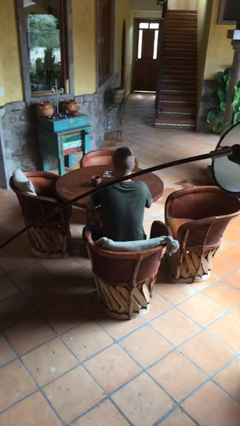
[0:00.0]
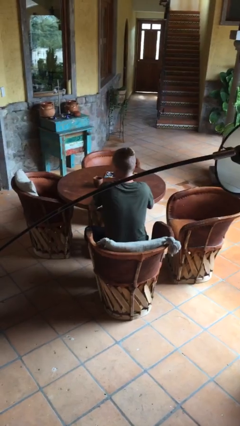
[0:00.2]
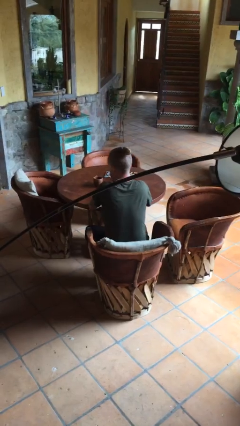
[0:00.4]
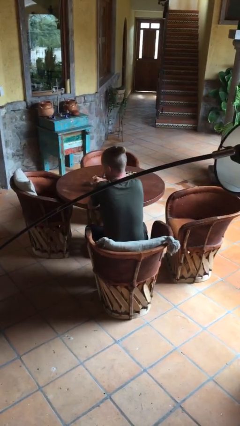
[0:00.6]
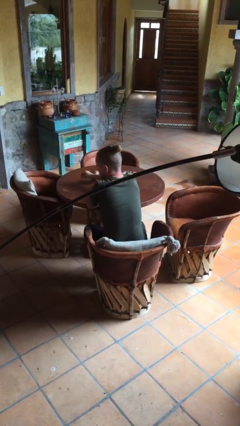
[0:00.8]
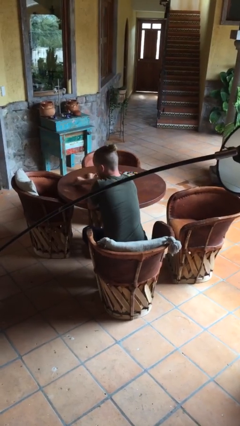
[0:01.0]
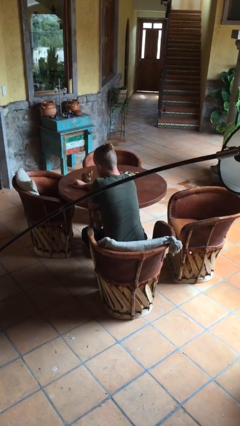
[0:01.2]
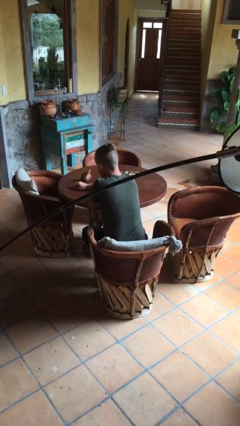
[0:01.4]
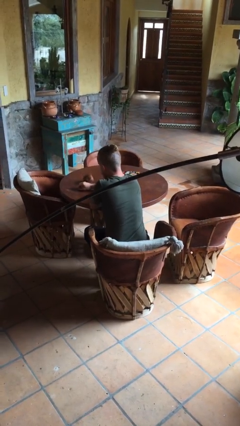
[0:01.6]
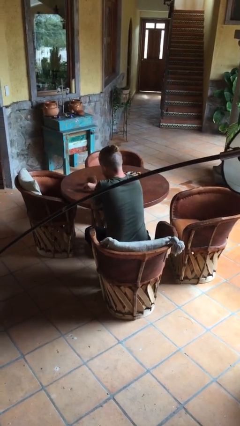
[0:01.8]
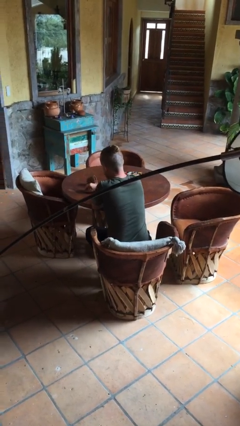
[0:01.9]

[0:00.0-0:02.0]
person knocks over glass

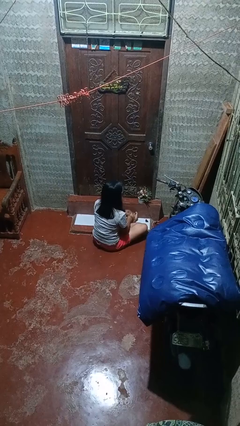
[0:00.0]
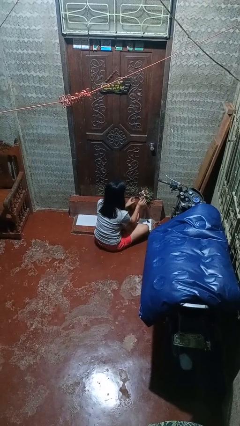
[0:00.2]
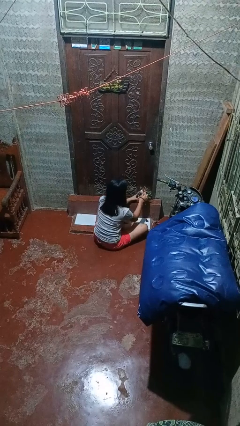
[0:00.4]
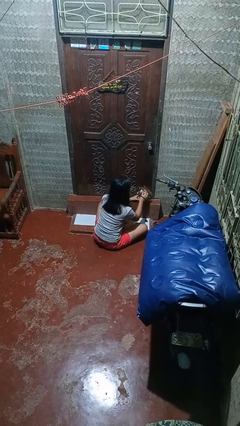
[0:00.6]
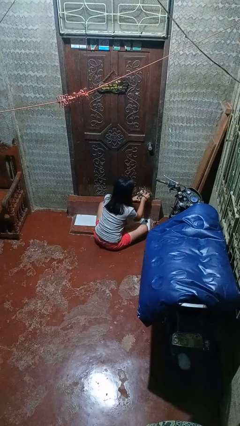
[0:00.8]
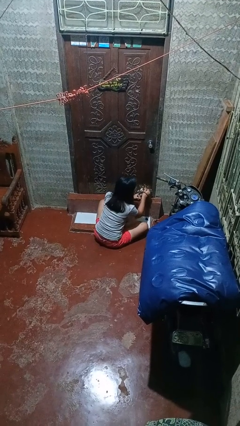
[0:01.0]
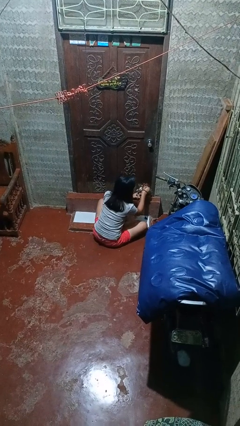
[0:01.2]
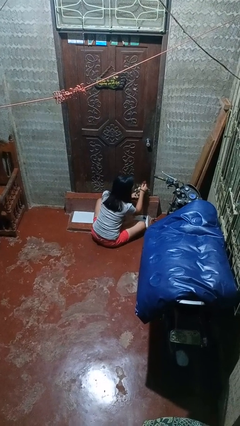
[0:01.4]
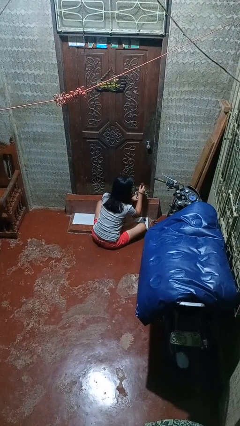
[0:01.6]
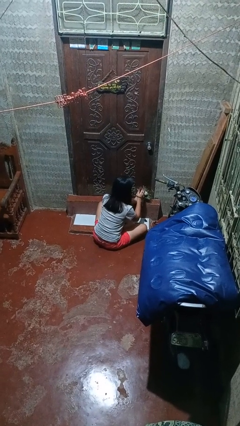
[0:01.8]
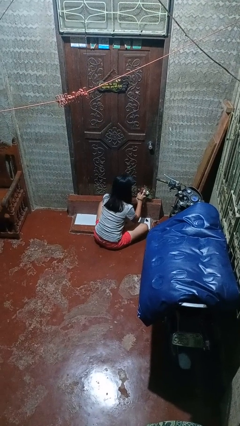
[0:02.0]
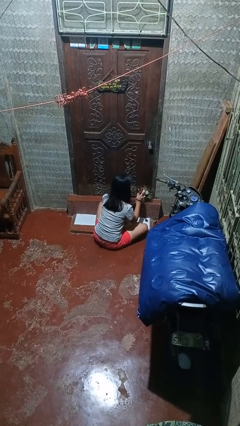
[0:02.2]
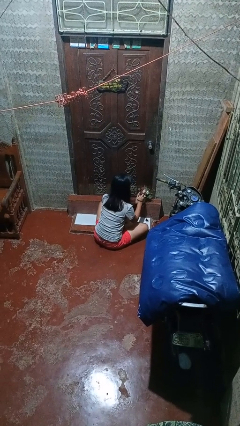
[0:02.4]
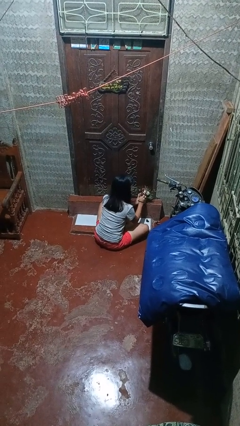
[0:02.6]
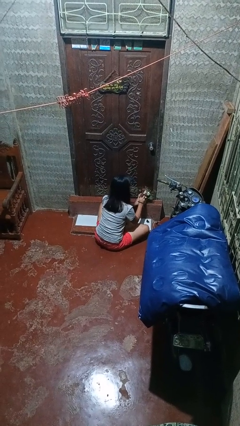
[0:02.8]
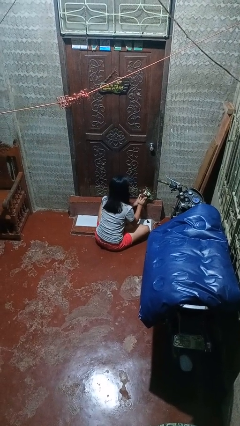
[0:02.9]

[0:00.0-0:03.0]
person arranges flowers in vase

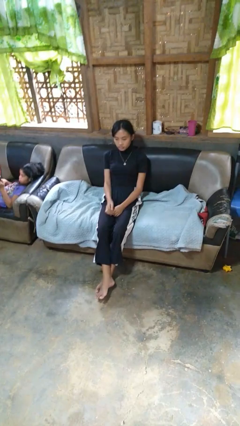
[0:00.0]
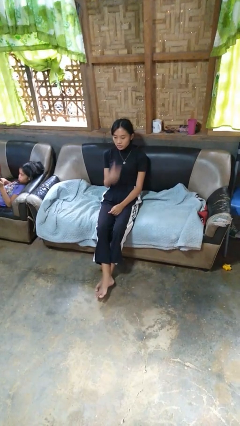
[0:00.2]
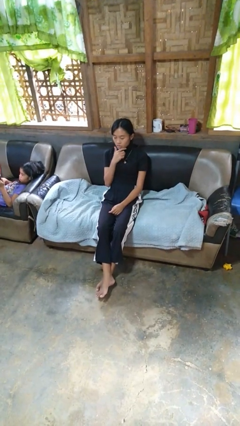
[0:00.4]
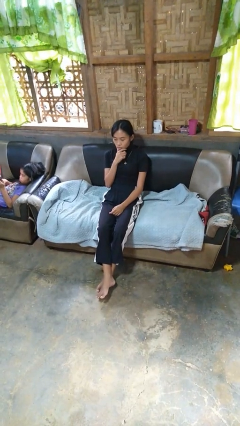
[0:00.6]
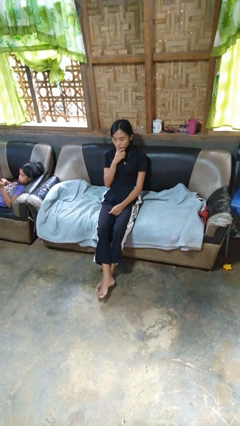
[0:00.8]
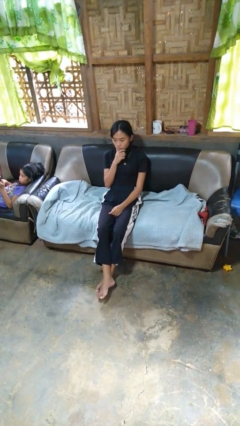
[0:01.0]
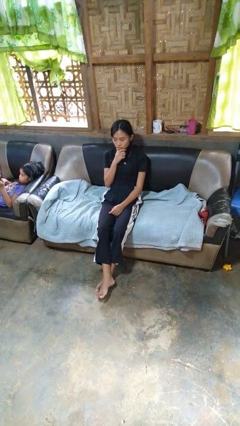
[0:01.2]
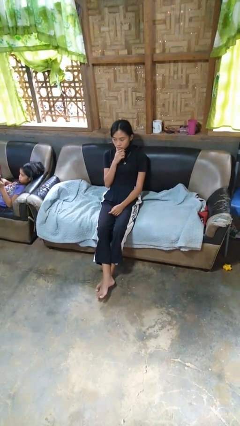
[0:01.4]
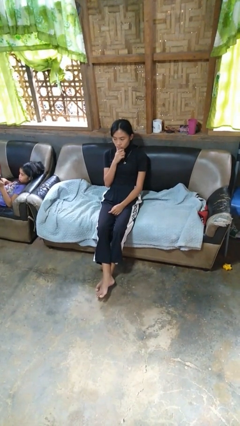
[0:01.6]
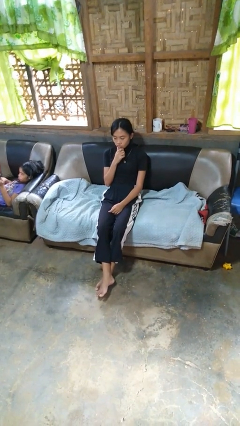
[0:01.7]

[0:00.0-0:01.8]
person strokes chin

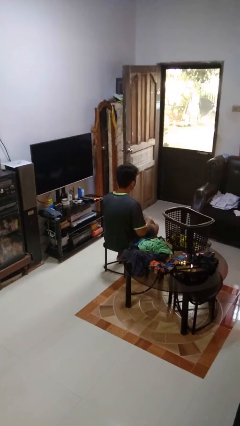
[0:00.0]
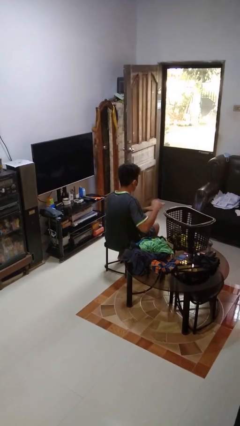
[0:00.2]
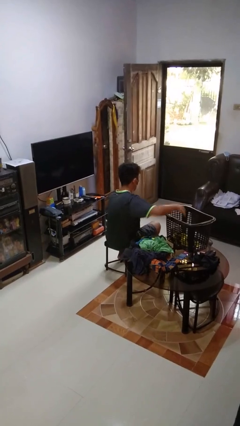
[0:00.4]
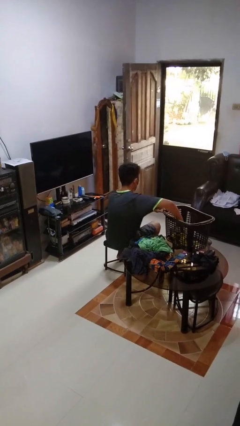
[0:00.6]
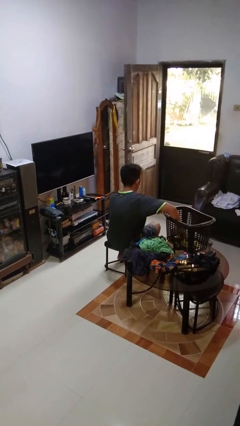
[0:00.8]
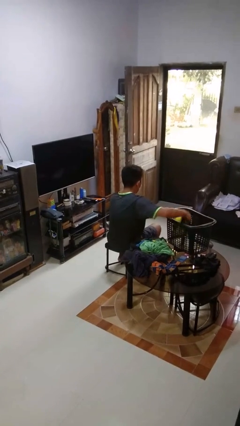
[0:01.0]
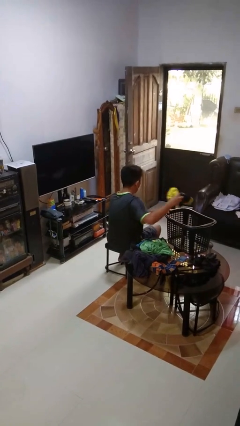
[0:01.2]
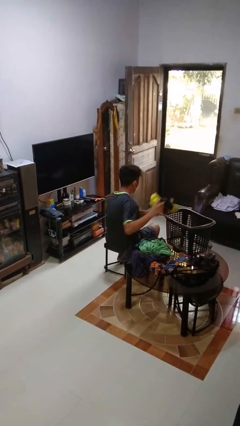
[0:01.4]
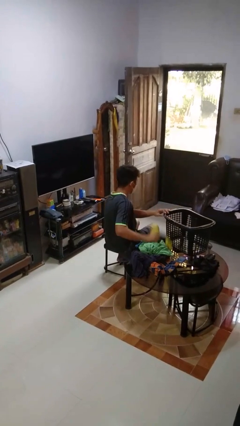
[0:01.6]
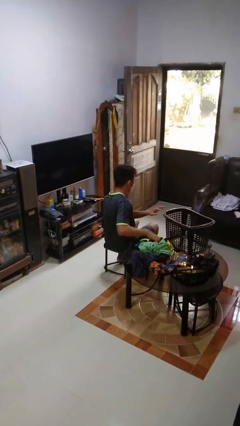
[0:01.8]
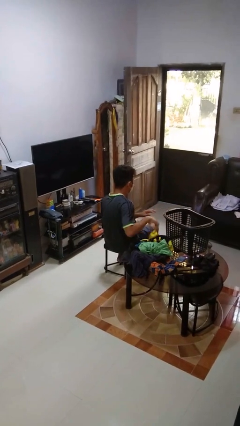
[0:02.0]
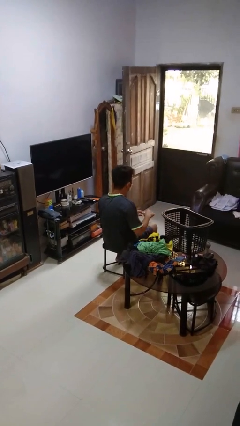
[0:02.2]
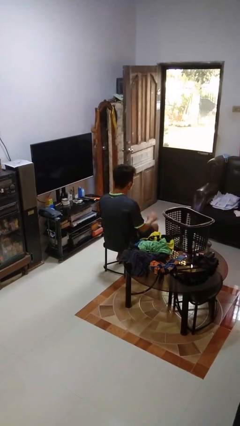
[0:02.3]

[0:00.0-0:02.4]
person takes object from basket

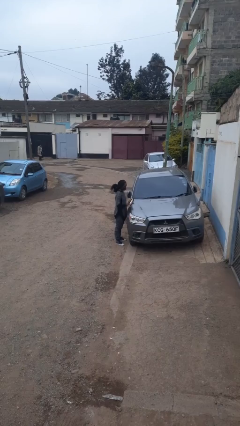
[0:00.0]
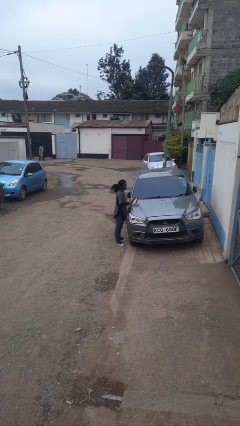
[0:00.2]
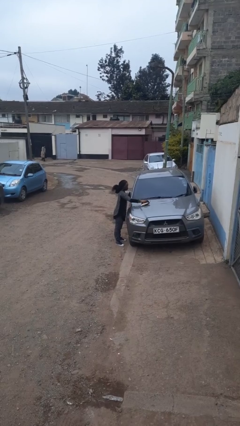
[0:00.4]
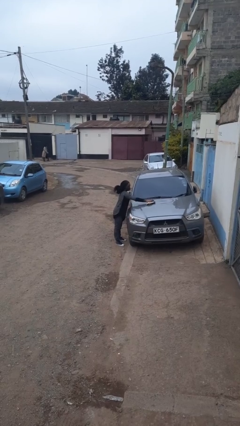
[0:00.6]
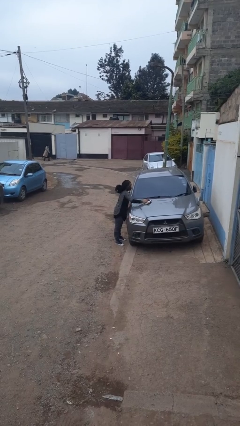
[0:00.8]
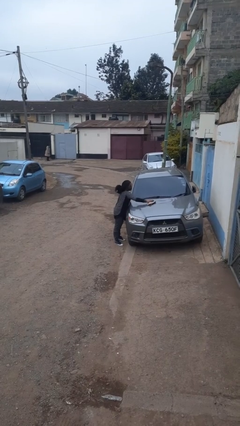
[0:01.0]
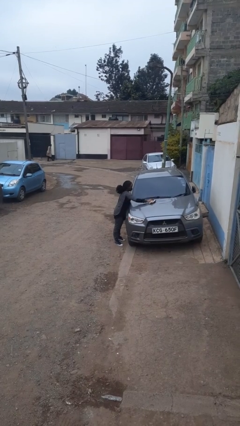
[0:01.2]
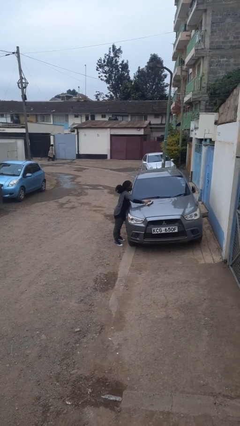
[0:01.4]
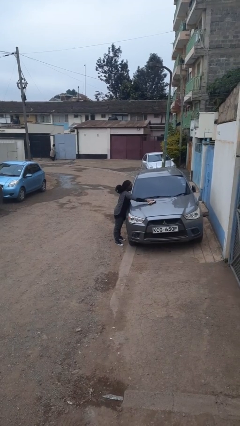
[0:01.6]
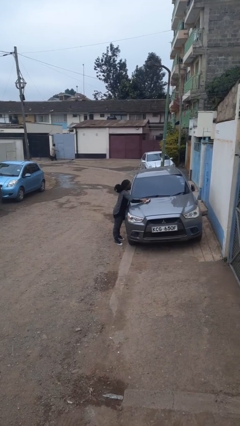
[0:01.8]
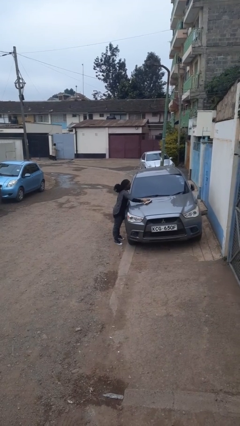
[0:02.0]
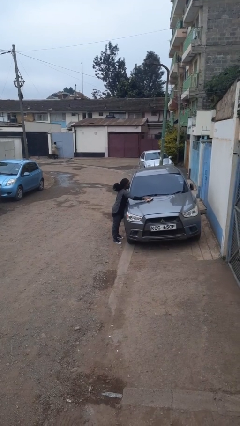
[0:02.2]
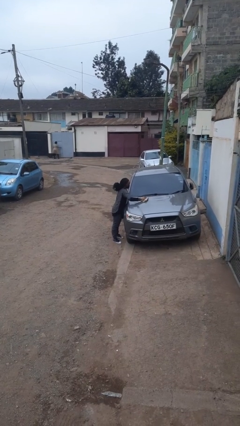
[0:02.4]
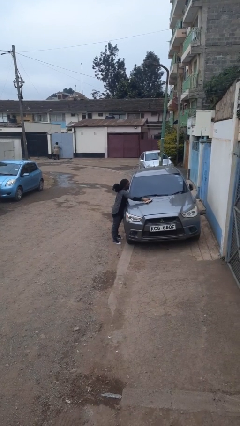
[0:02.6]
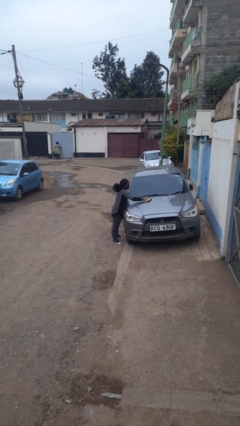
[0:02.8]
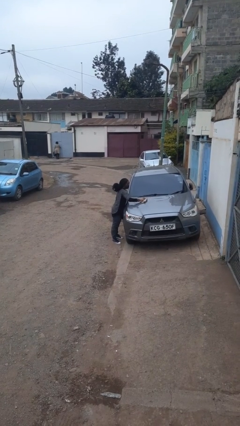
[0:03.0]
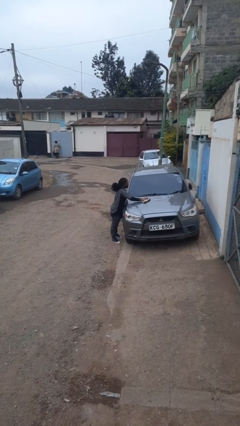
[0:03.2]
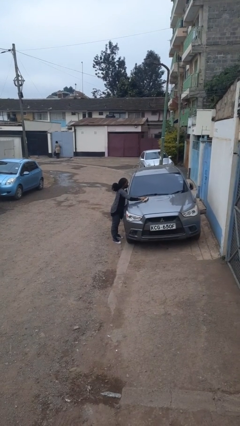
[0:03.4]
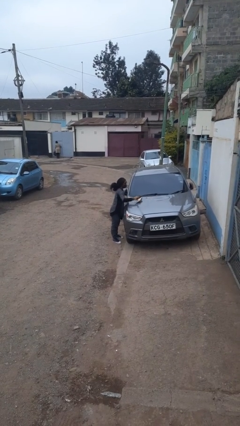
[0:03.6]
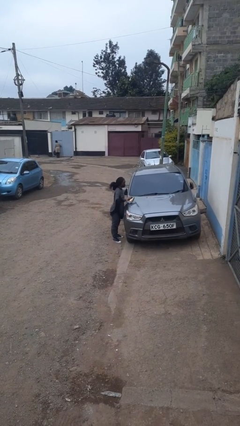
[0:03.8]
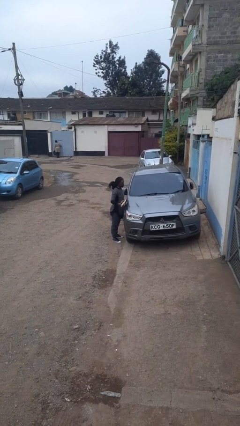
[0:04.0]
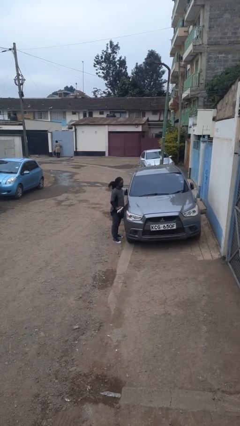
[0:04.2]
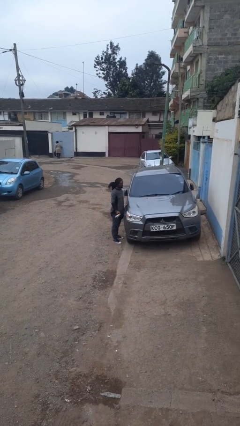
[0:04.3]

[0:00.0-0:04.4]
person polishes car with rag

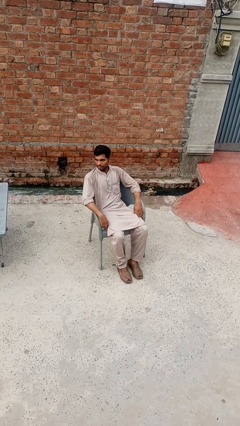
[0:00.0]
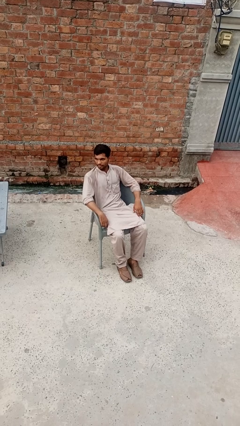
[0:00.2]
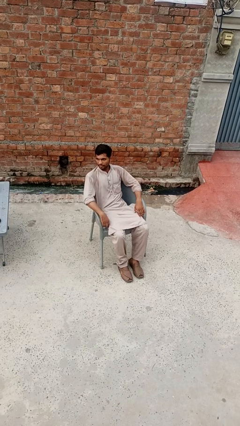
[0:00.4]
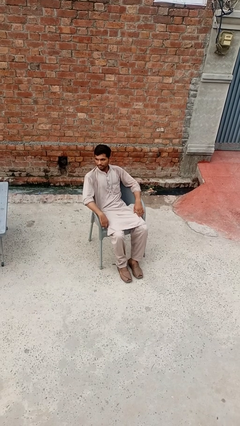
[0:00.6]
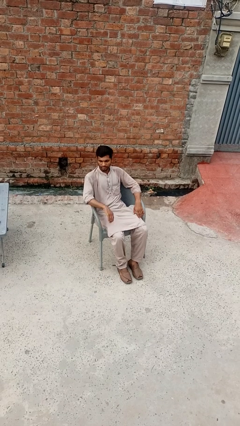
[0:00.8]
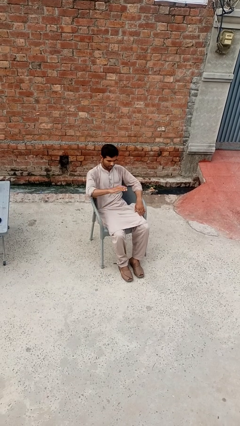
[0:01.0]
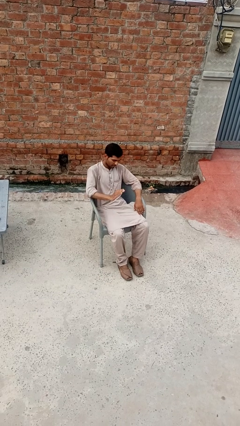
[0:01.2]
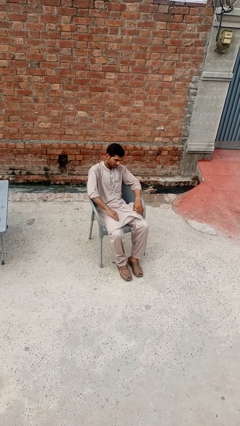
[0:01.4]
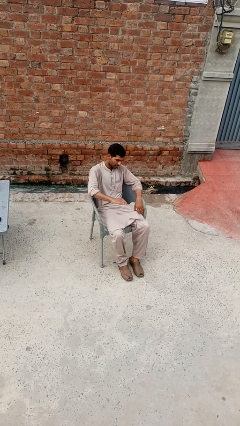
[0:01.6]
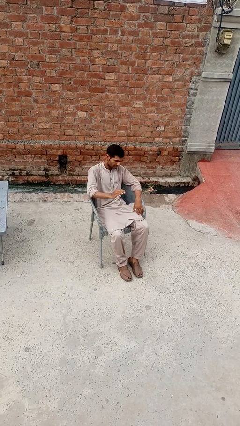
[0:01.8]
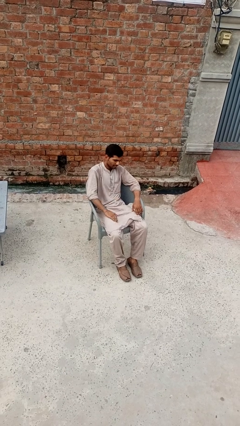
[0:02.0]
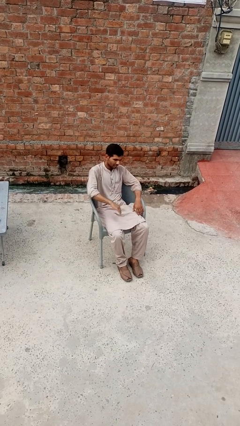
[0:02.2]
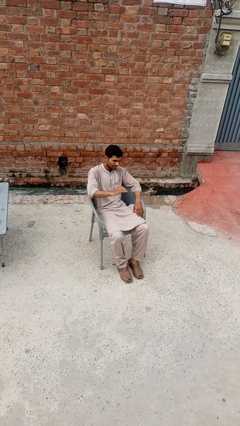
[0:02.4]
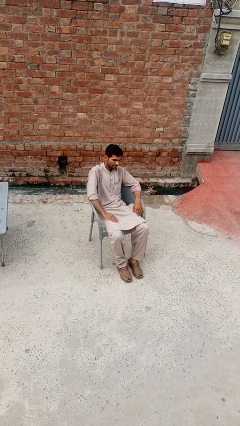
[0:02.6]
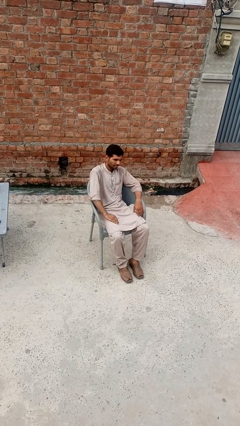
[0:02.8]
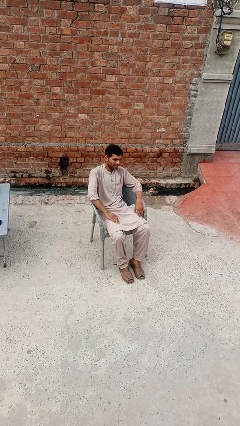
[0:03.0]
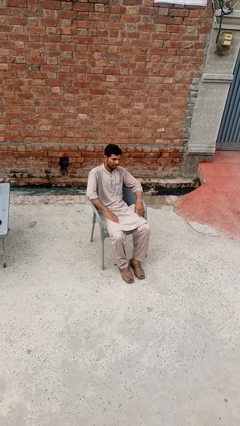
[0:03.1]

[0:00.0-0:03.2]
person slaps hands on thighs

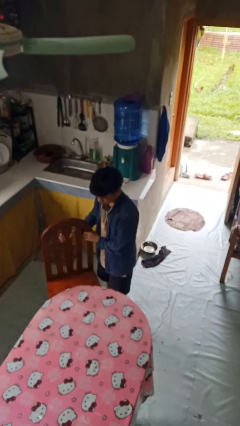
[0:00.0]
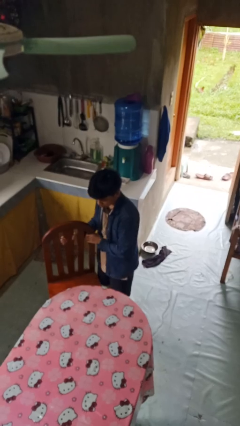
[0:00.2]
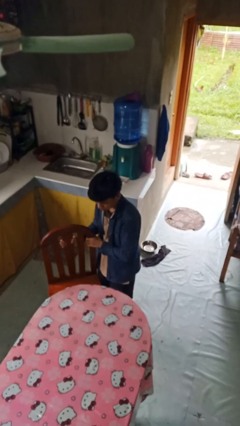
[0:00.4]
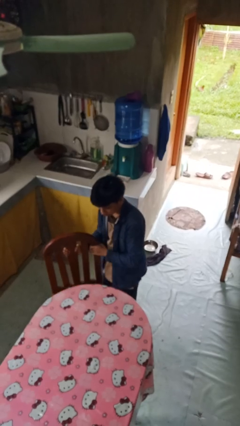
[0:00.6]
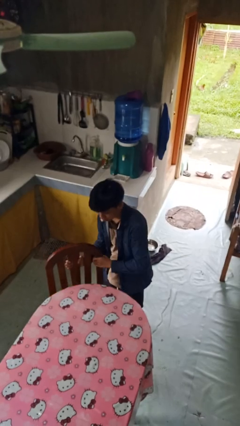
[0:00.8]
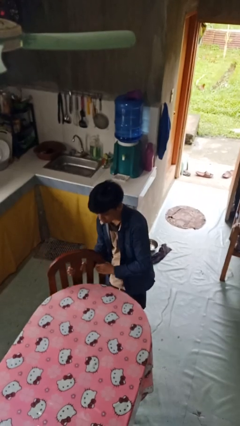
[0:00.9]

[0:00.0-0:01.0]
person pushes in chair
